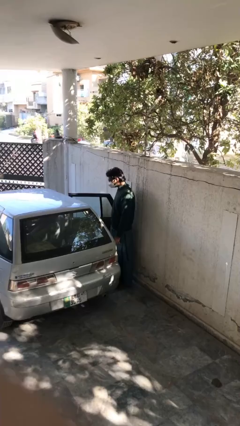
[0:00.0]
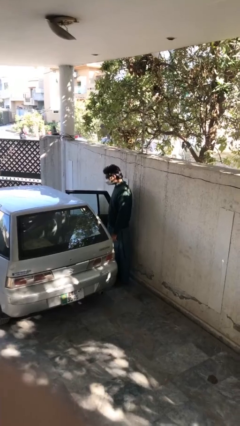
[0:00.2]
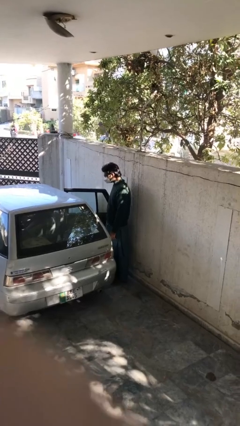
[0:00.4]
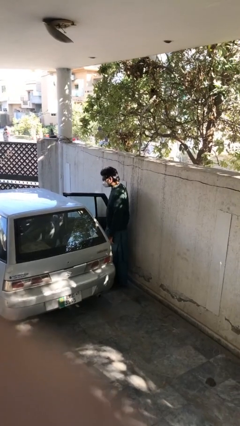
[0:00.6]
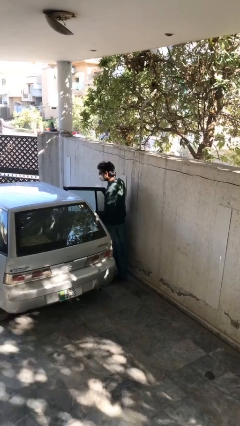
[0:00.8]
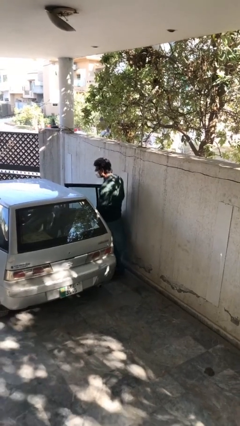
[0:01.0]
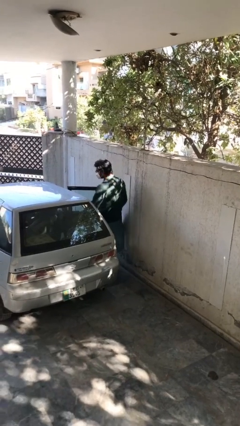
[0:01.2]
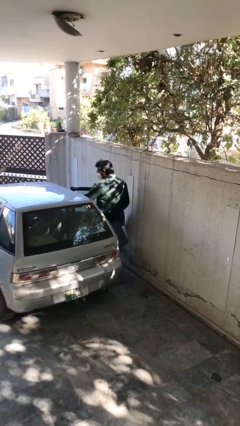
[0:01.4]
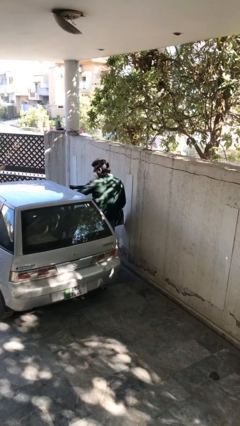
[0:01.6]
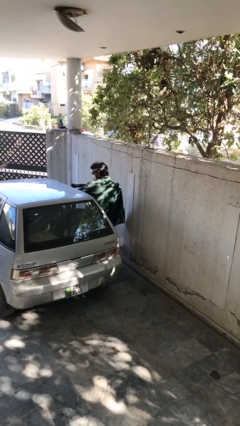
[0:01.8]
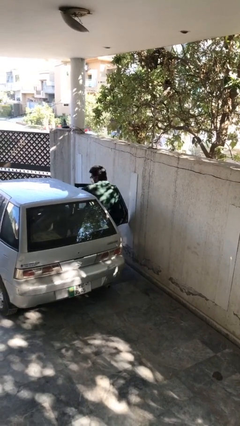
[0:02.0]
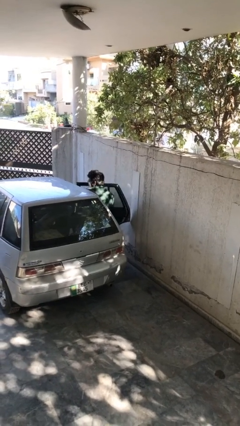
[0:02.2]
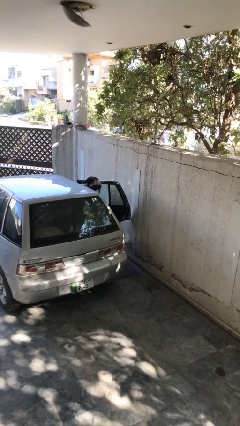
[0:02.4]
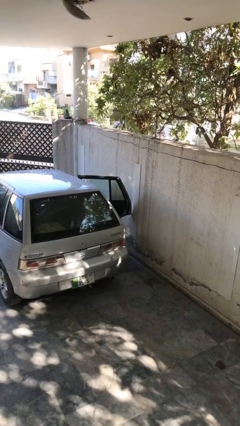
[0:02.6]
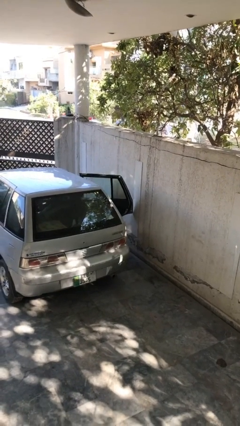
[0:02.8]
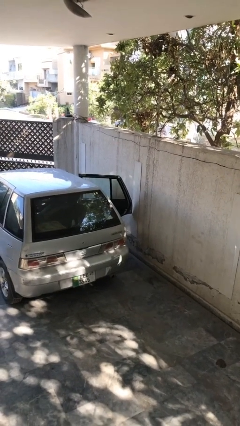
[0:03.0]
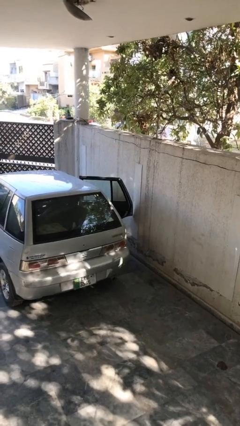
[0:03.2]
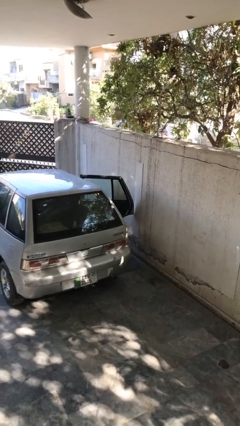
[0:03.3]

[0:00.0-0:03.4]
person enters car

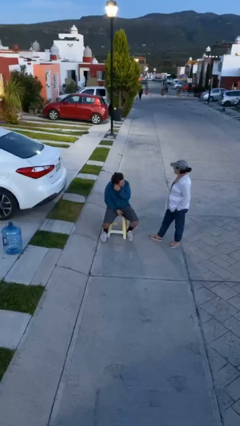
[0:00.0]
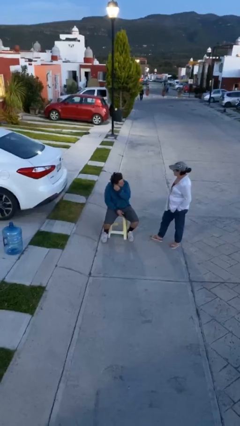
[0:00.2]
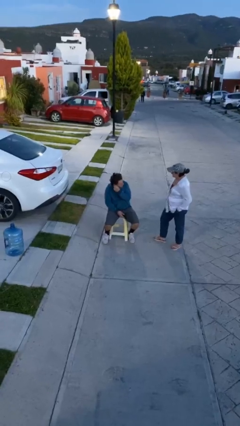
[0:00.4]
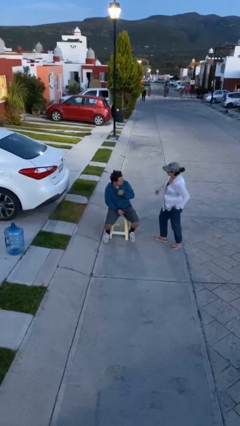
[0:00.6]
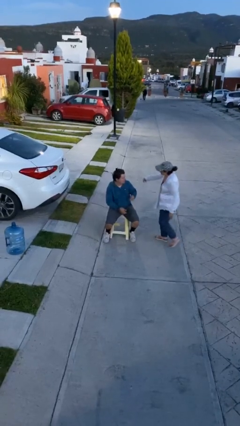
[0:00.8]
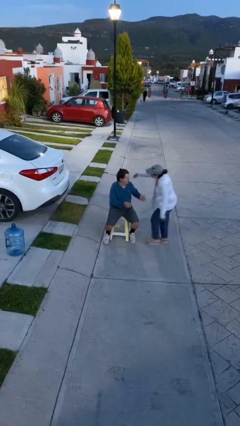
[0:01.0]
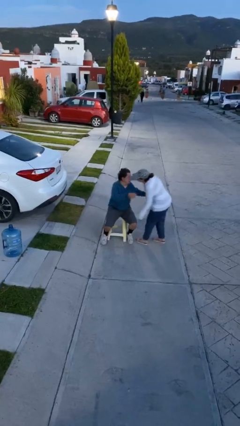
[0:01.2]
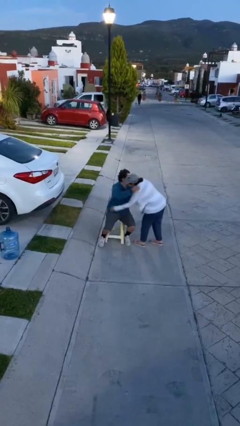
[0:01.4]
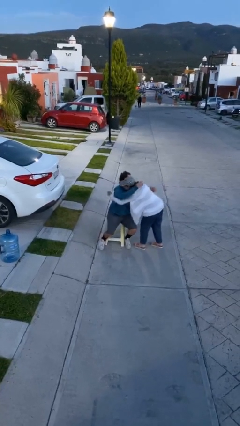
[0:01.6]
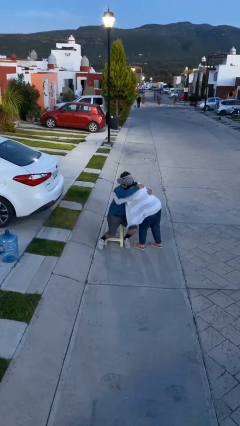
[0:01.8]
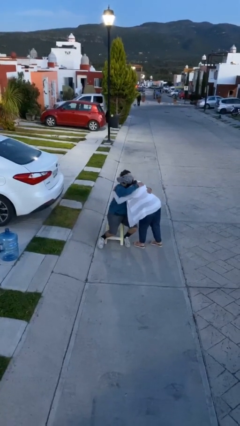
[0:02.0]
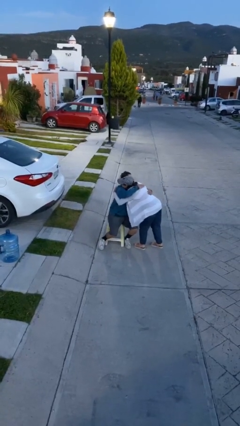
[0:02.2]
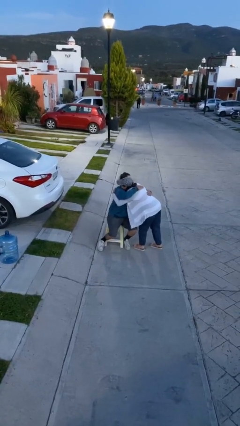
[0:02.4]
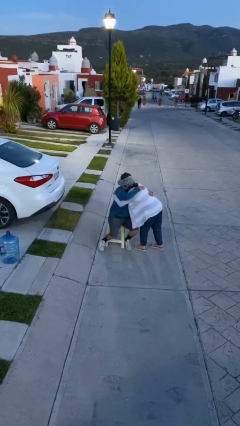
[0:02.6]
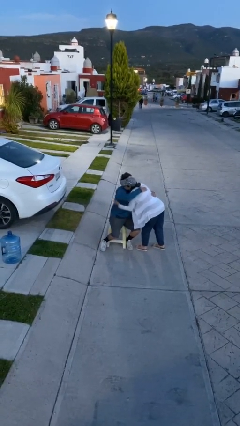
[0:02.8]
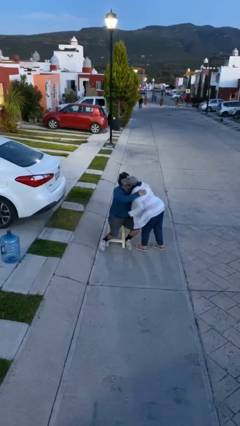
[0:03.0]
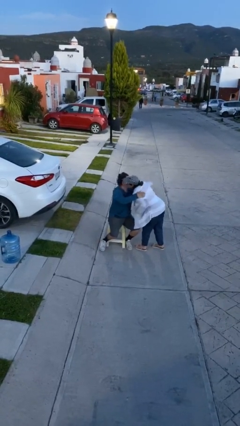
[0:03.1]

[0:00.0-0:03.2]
person embraces person

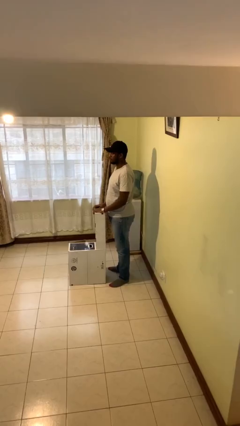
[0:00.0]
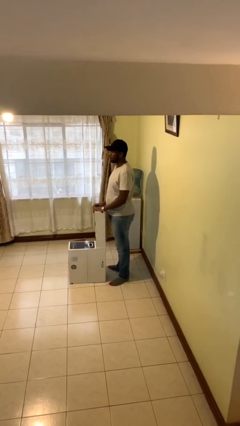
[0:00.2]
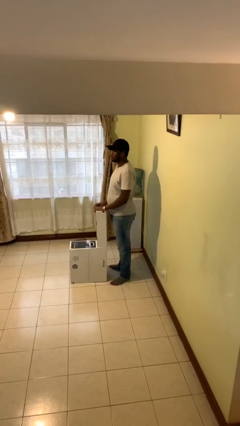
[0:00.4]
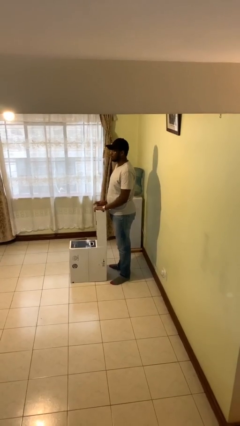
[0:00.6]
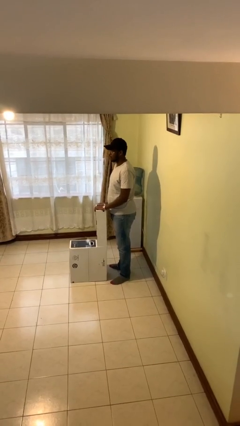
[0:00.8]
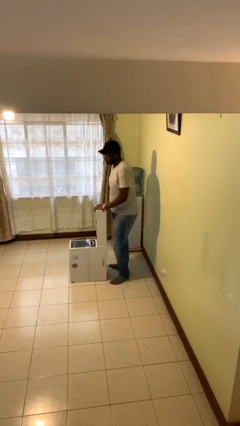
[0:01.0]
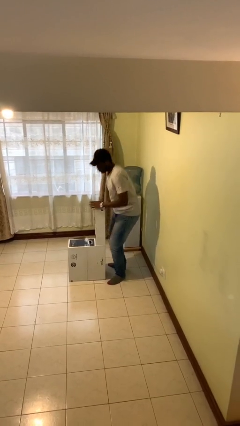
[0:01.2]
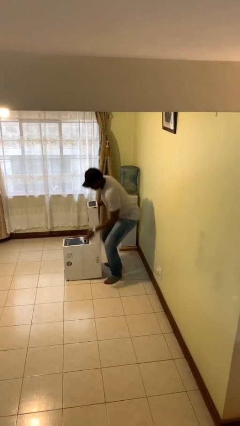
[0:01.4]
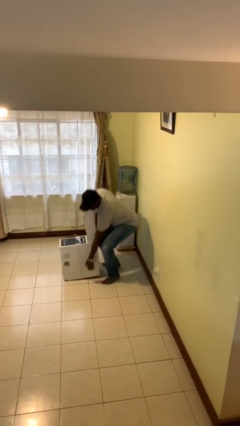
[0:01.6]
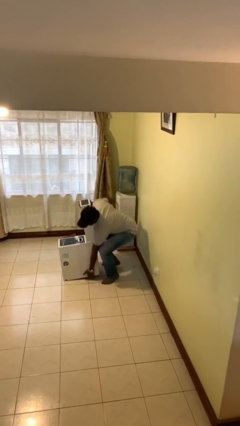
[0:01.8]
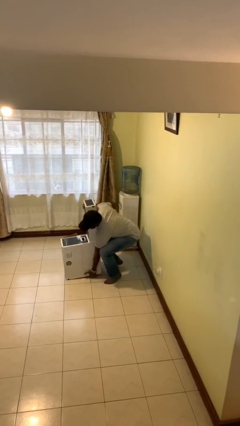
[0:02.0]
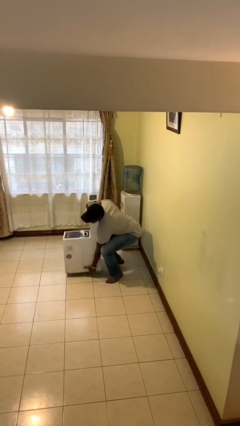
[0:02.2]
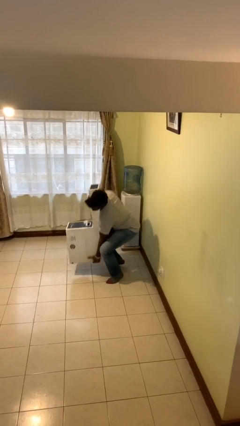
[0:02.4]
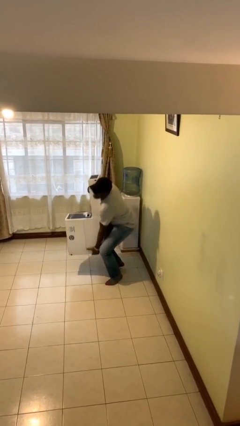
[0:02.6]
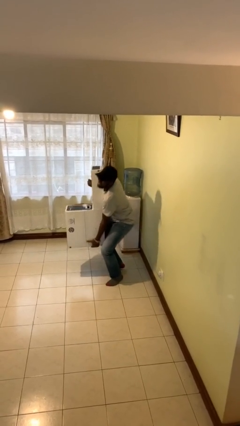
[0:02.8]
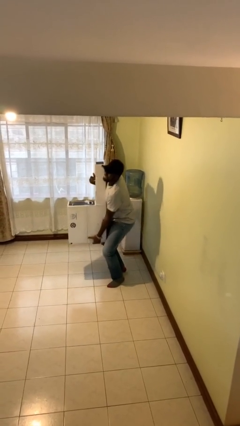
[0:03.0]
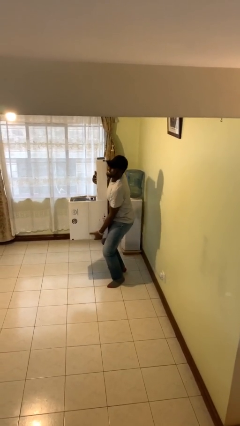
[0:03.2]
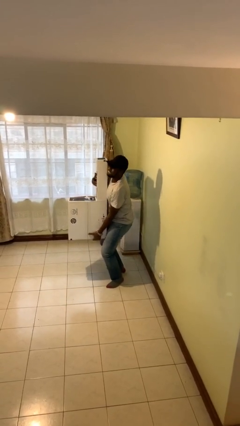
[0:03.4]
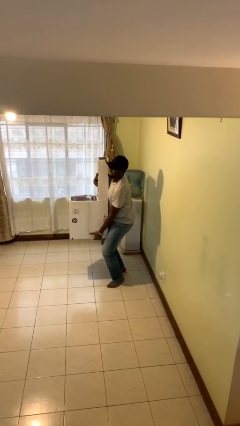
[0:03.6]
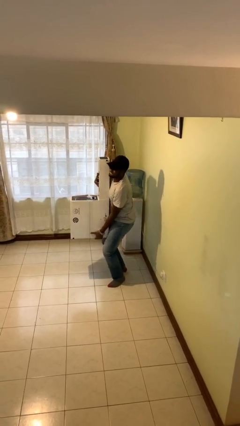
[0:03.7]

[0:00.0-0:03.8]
person picks up object from floor

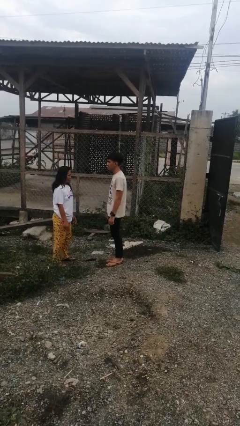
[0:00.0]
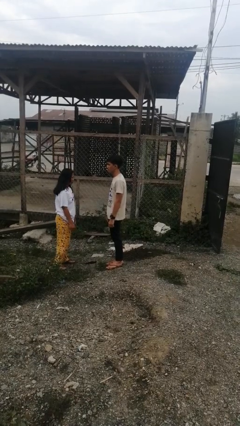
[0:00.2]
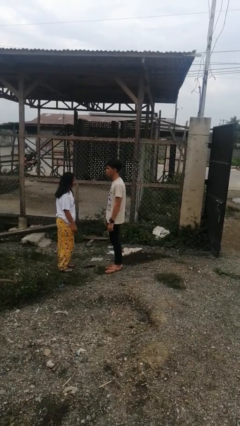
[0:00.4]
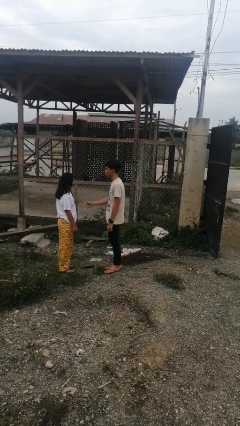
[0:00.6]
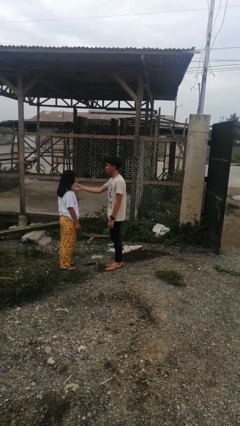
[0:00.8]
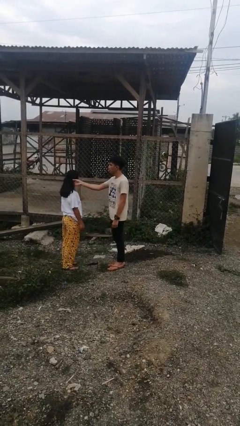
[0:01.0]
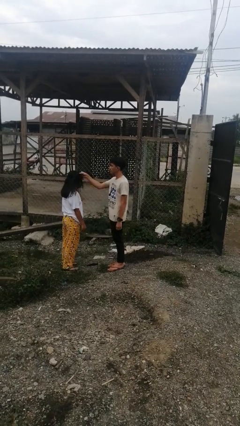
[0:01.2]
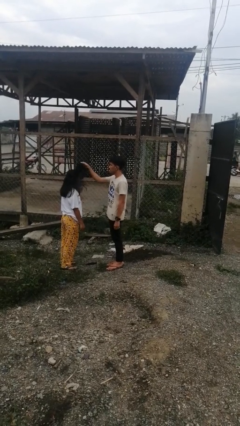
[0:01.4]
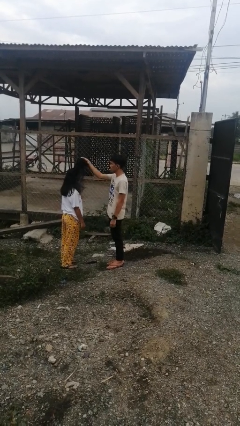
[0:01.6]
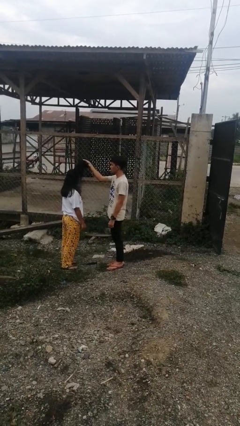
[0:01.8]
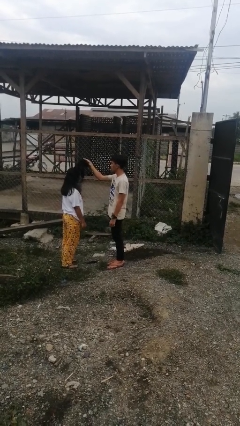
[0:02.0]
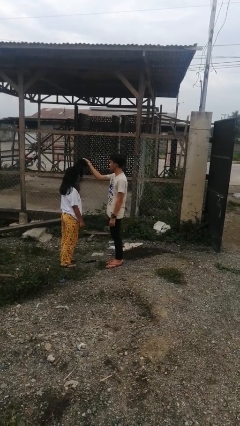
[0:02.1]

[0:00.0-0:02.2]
person grabs person by hair

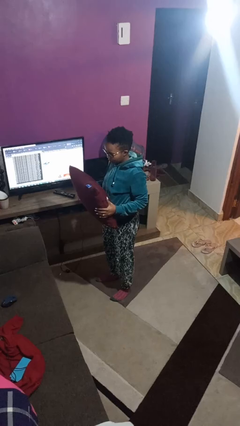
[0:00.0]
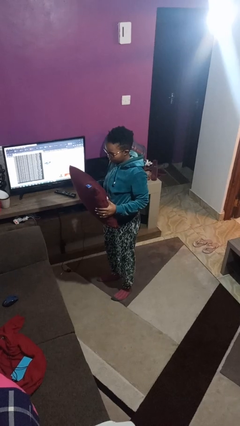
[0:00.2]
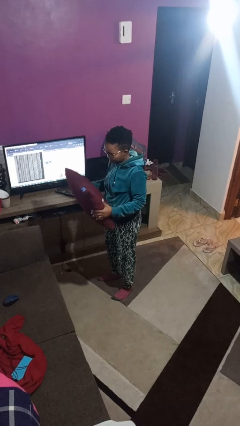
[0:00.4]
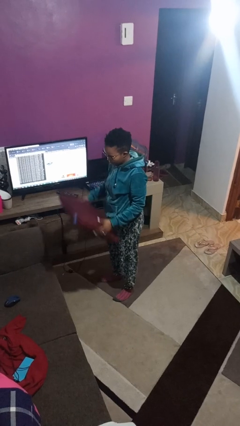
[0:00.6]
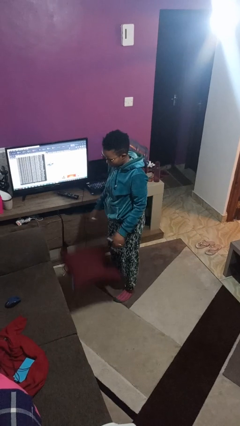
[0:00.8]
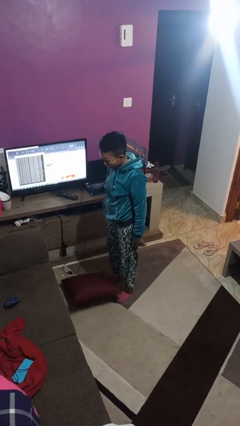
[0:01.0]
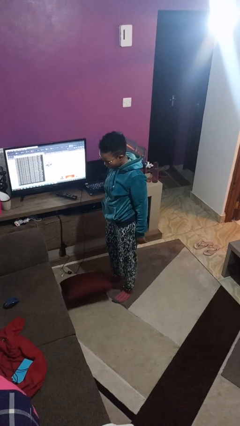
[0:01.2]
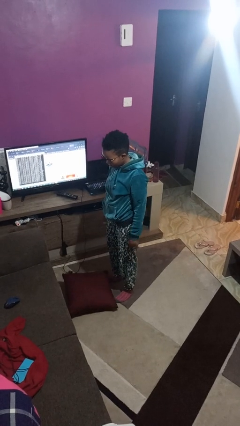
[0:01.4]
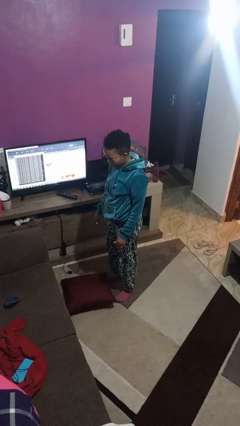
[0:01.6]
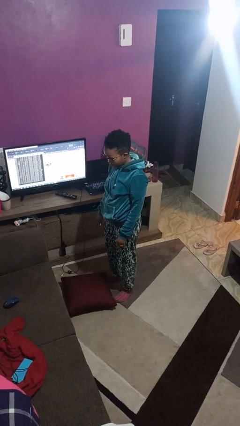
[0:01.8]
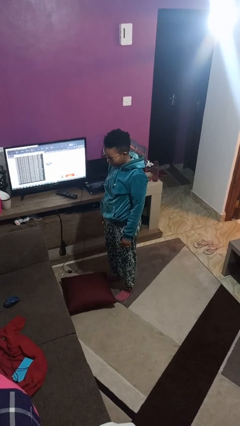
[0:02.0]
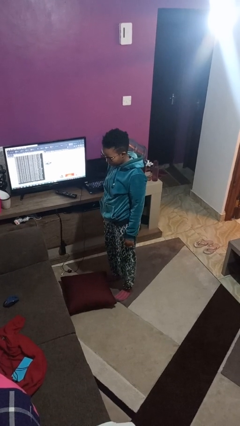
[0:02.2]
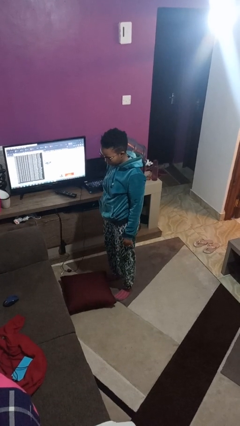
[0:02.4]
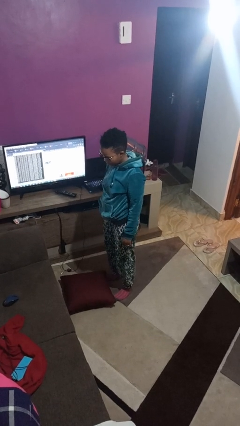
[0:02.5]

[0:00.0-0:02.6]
person throws object to ground

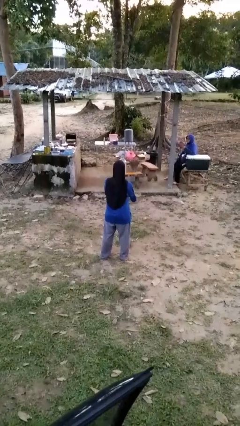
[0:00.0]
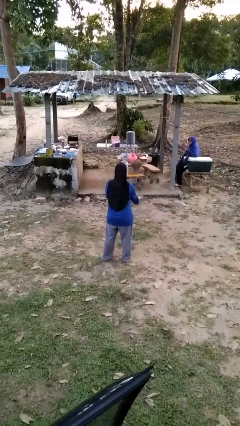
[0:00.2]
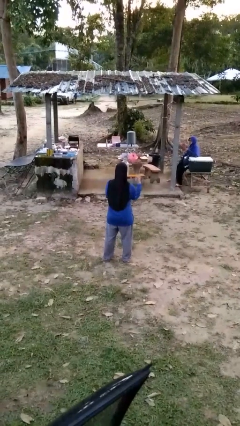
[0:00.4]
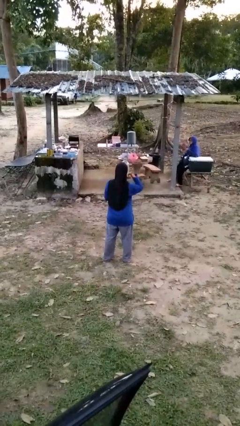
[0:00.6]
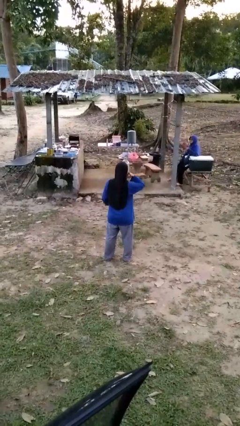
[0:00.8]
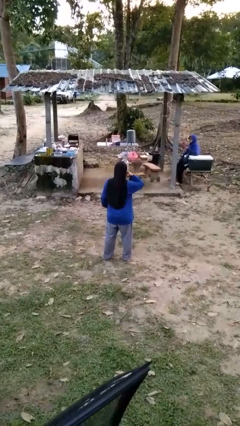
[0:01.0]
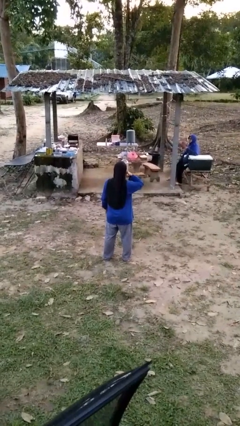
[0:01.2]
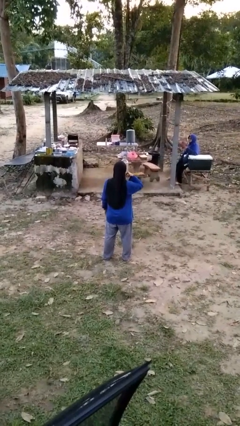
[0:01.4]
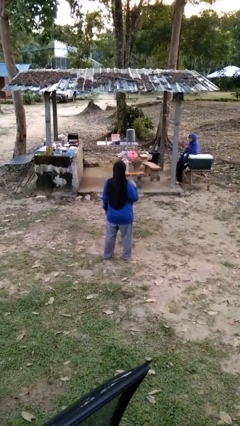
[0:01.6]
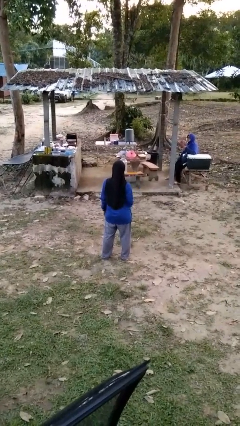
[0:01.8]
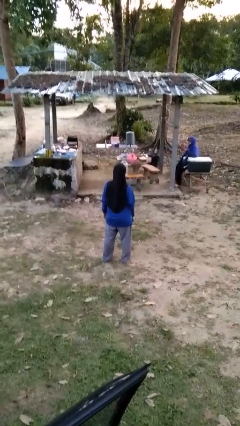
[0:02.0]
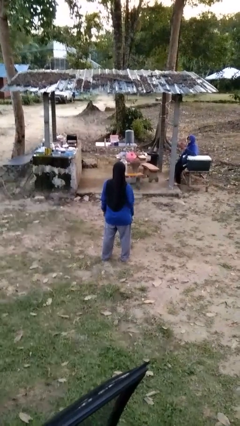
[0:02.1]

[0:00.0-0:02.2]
person gestures call me
